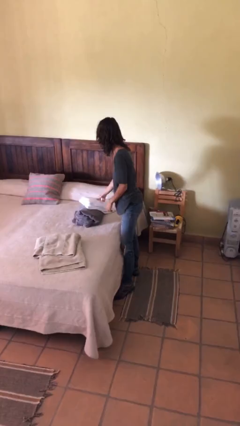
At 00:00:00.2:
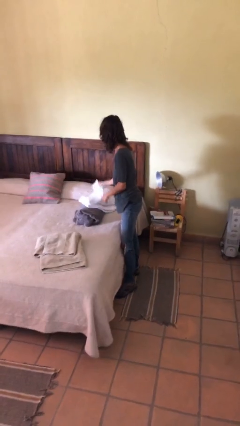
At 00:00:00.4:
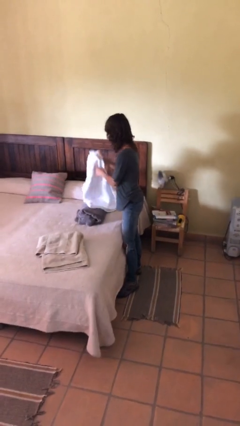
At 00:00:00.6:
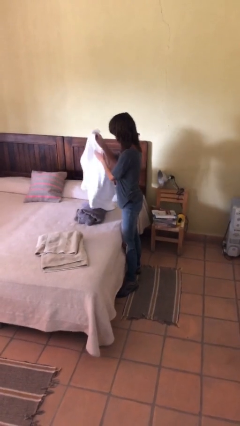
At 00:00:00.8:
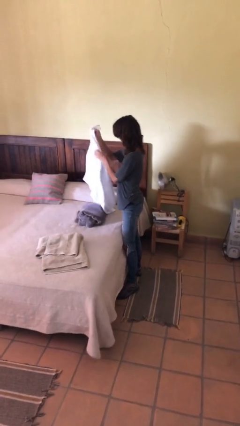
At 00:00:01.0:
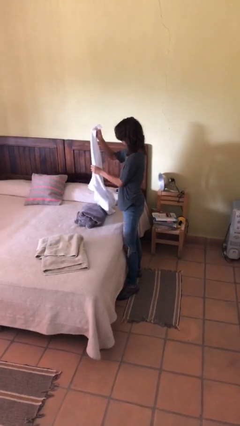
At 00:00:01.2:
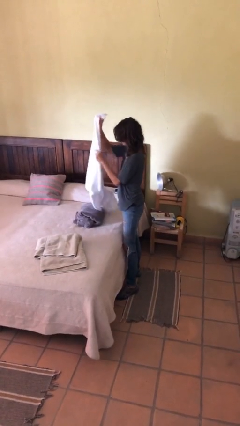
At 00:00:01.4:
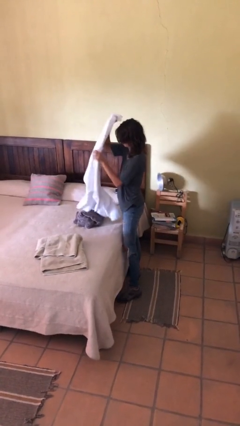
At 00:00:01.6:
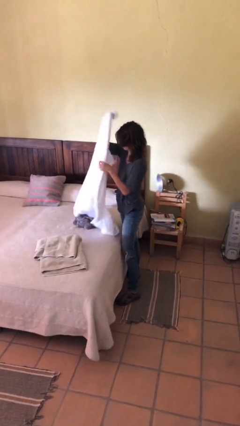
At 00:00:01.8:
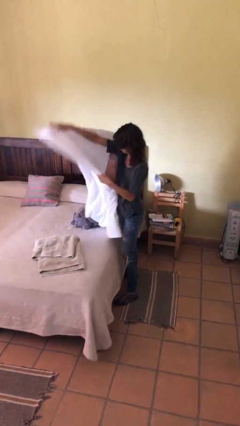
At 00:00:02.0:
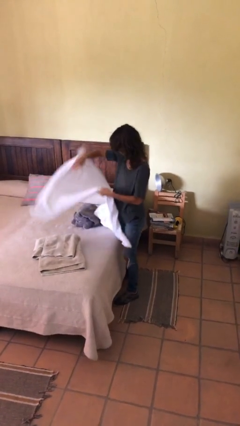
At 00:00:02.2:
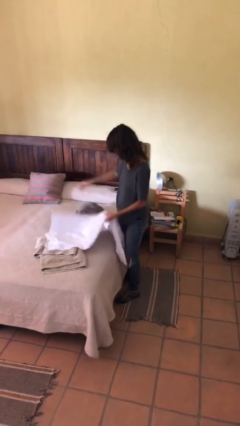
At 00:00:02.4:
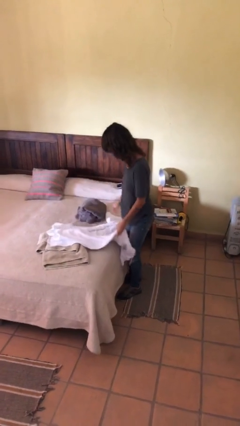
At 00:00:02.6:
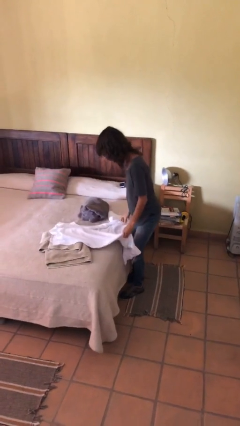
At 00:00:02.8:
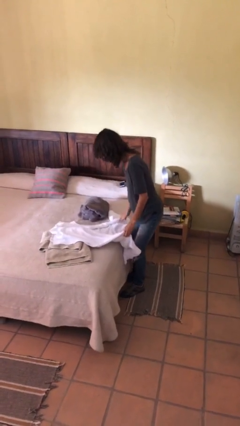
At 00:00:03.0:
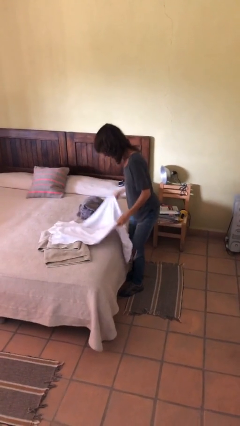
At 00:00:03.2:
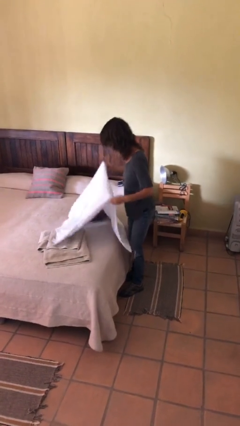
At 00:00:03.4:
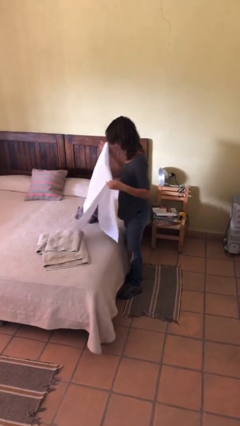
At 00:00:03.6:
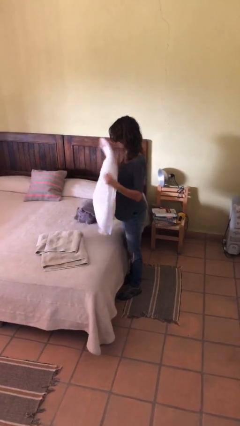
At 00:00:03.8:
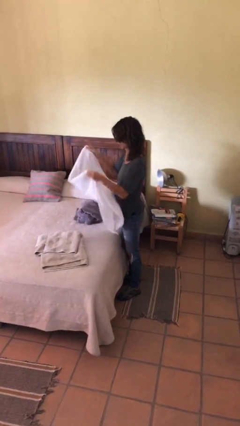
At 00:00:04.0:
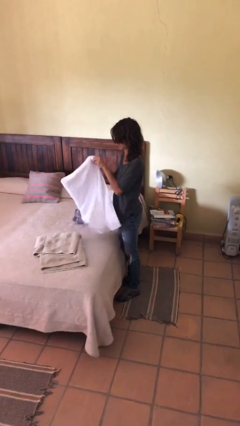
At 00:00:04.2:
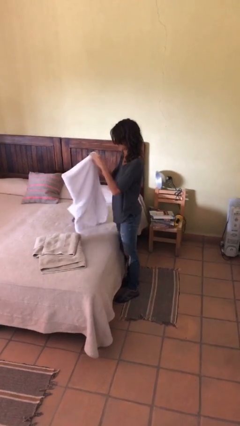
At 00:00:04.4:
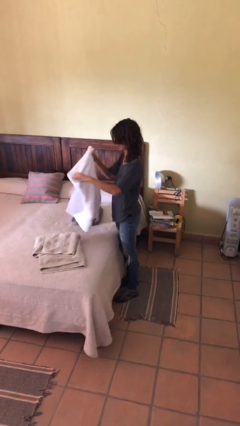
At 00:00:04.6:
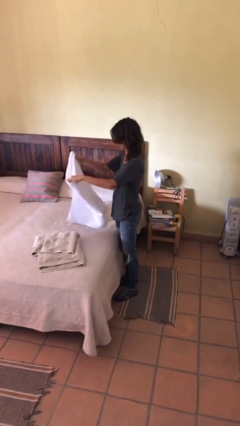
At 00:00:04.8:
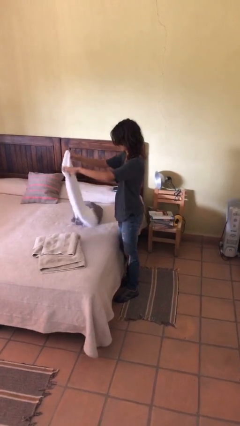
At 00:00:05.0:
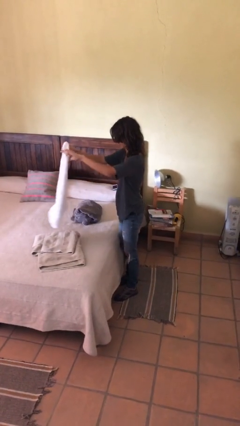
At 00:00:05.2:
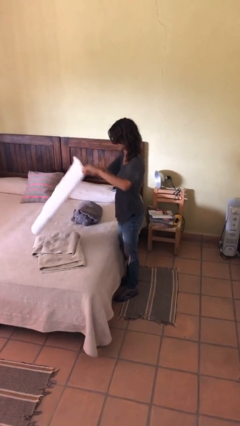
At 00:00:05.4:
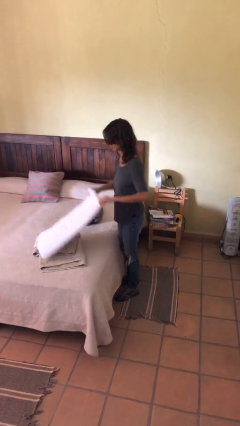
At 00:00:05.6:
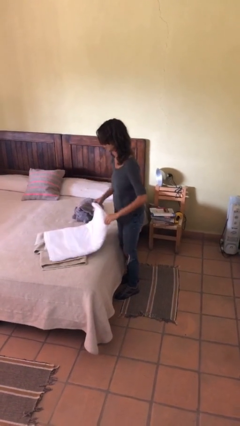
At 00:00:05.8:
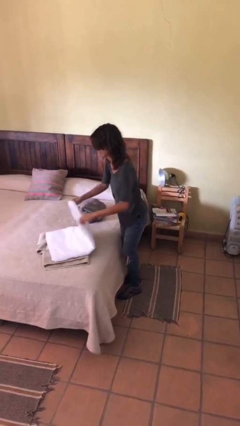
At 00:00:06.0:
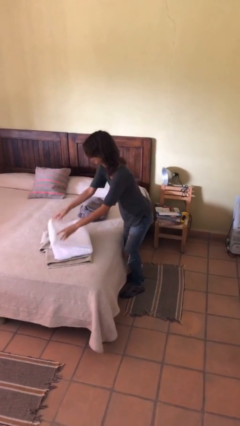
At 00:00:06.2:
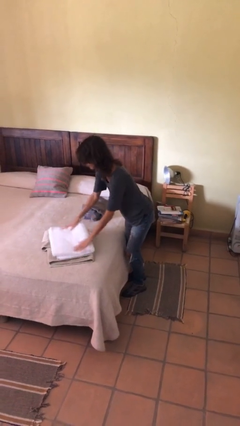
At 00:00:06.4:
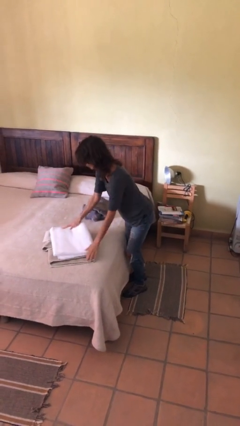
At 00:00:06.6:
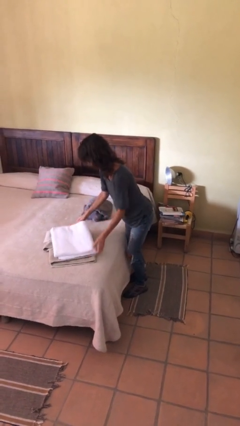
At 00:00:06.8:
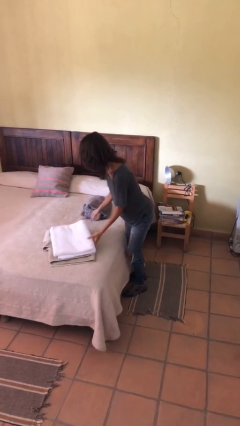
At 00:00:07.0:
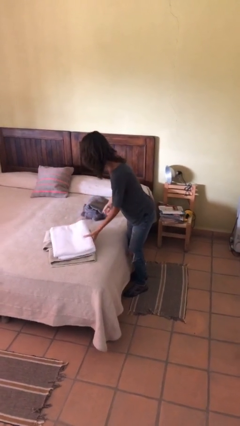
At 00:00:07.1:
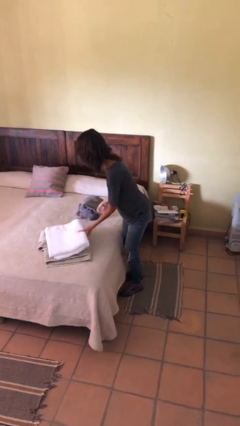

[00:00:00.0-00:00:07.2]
person folds towel

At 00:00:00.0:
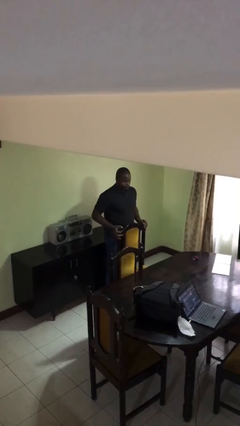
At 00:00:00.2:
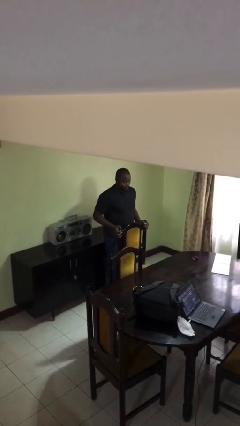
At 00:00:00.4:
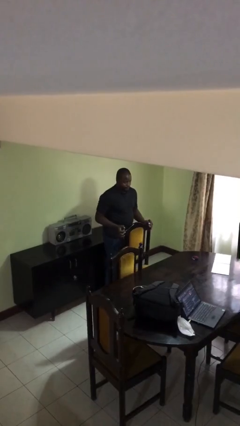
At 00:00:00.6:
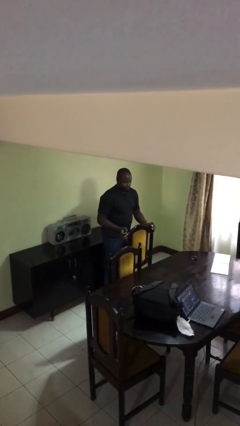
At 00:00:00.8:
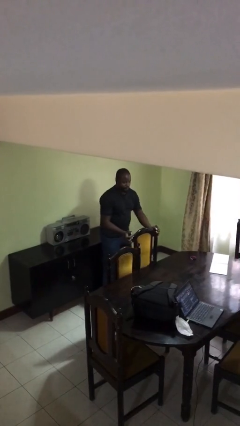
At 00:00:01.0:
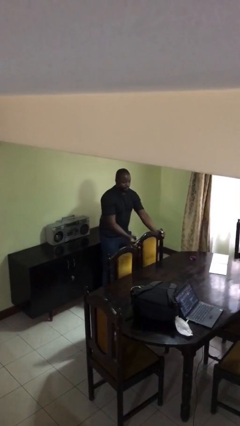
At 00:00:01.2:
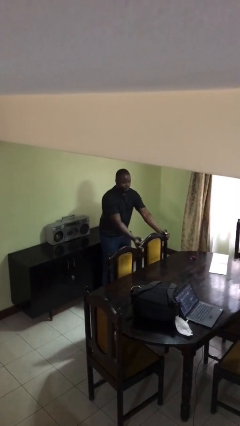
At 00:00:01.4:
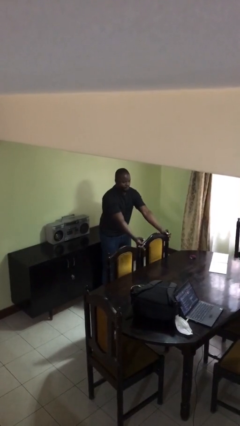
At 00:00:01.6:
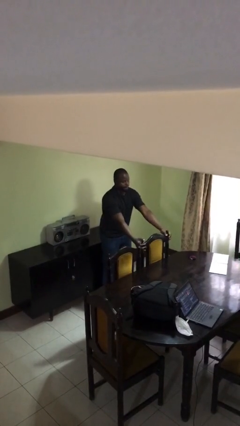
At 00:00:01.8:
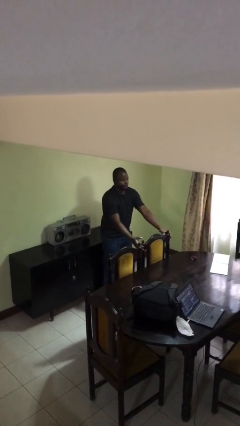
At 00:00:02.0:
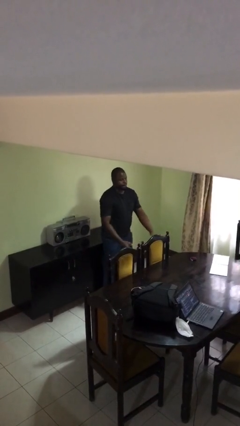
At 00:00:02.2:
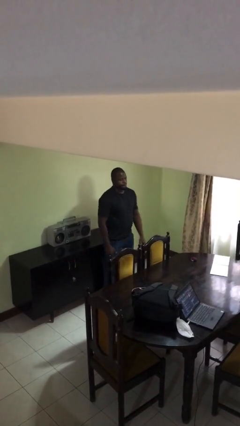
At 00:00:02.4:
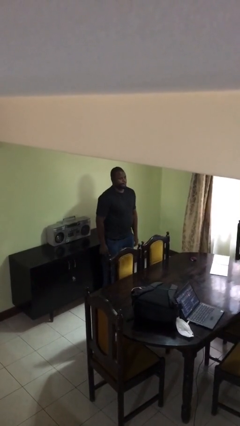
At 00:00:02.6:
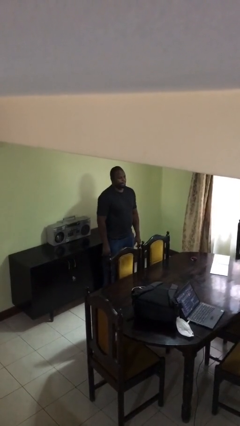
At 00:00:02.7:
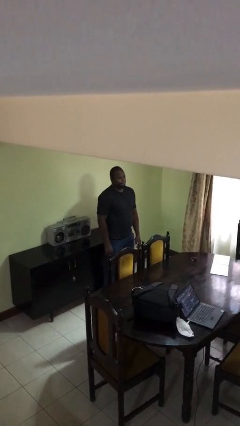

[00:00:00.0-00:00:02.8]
person pushes in chair

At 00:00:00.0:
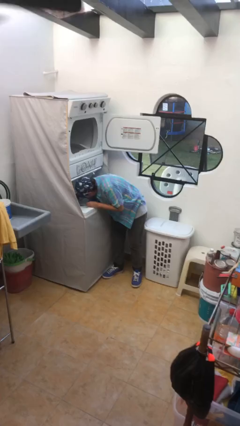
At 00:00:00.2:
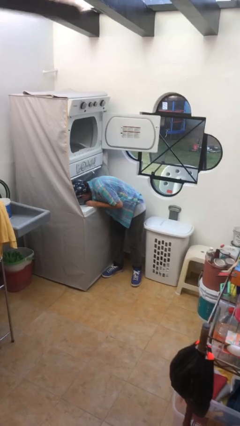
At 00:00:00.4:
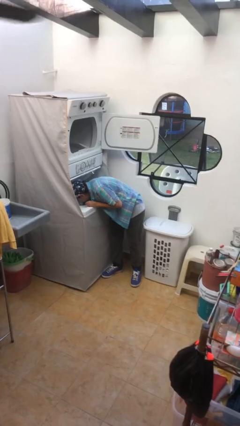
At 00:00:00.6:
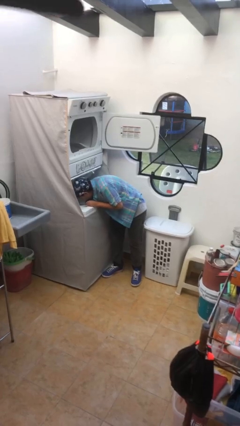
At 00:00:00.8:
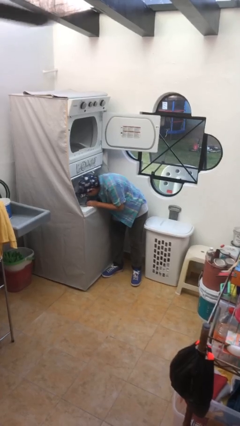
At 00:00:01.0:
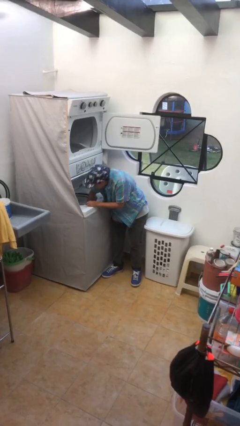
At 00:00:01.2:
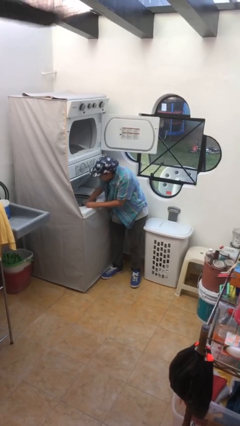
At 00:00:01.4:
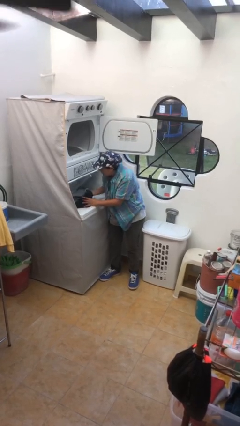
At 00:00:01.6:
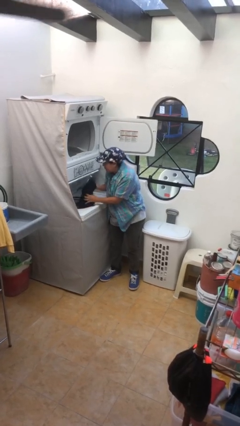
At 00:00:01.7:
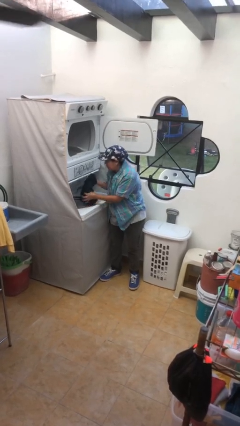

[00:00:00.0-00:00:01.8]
person unloads clotheswasher

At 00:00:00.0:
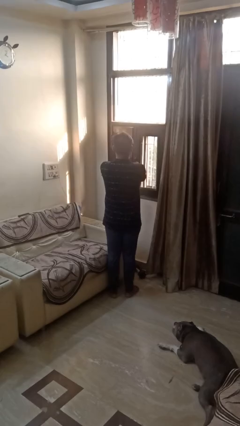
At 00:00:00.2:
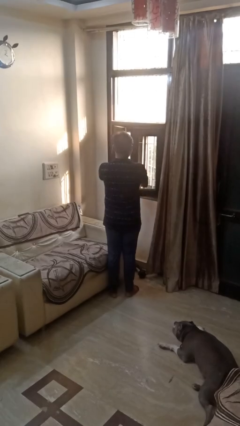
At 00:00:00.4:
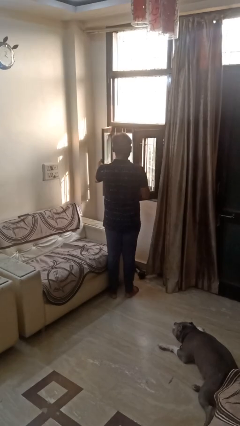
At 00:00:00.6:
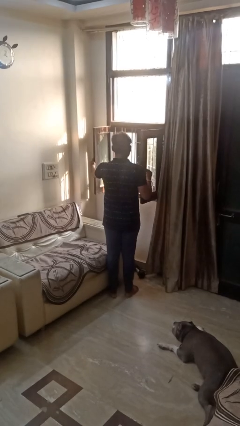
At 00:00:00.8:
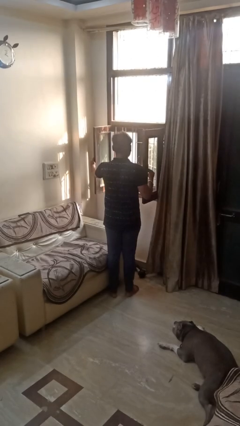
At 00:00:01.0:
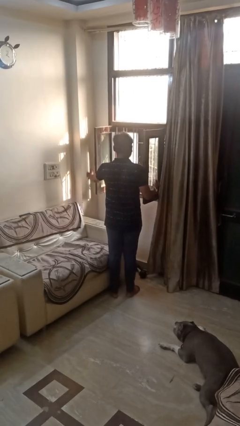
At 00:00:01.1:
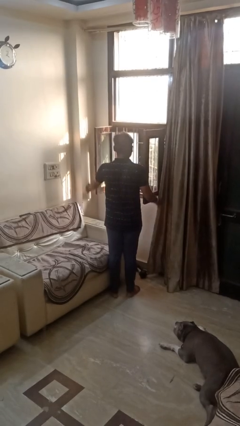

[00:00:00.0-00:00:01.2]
person opens home window

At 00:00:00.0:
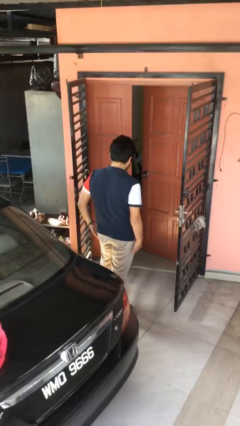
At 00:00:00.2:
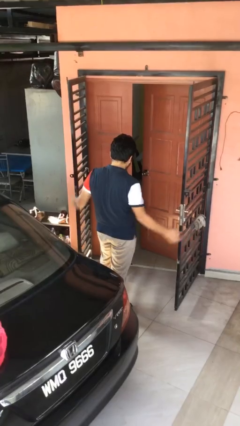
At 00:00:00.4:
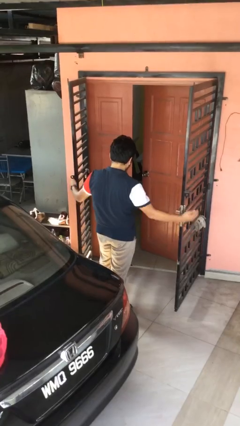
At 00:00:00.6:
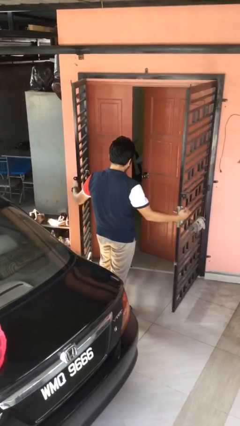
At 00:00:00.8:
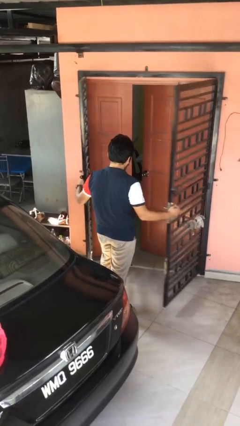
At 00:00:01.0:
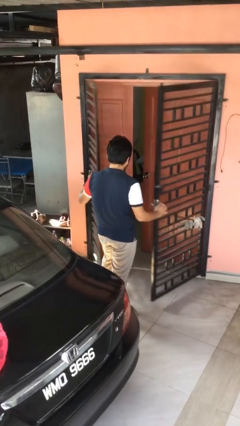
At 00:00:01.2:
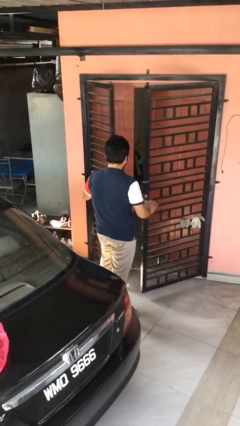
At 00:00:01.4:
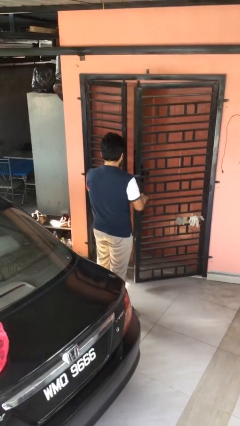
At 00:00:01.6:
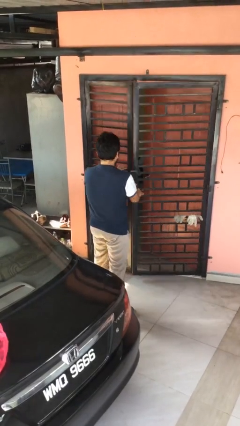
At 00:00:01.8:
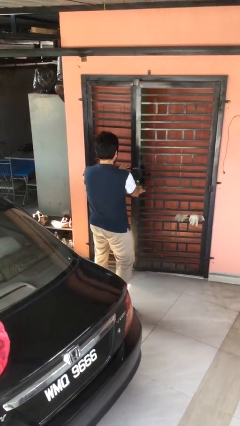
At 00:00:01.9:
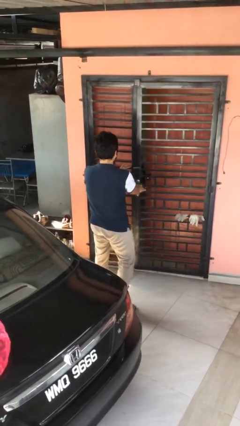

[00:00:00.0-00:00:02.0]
person closes gate

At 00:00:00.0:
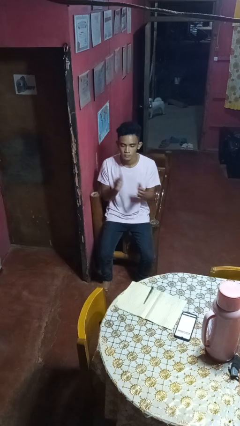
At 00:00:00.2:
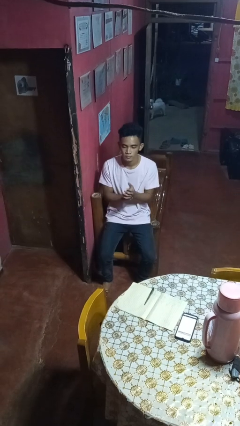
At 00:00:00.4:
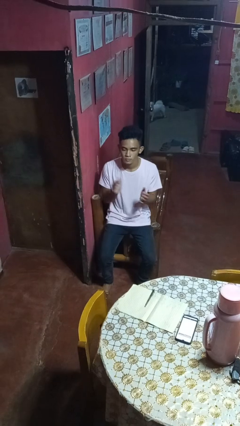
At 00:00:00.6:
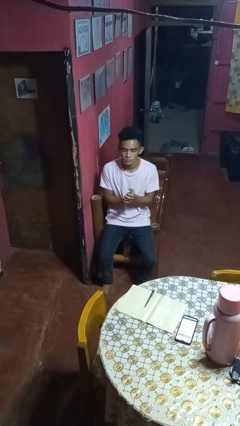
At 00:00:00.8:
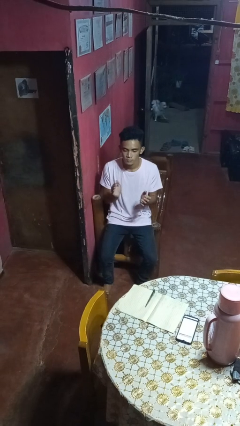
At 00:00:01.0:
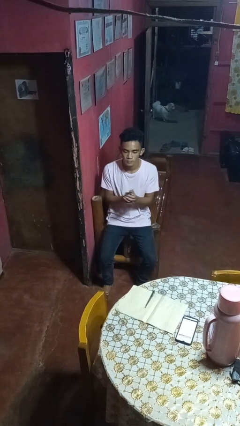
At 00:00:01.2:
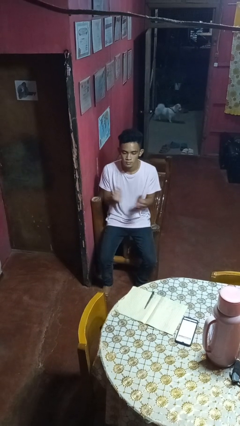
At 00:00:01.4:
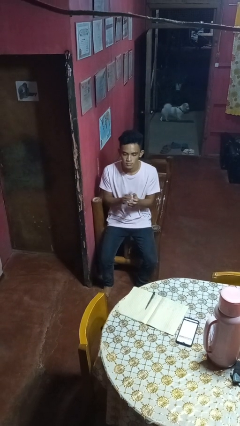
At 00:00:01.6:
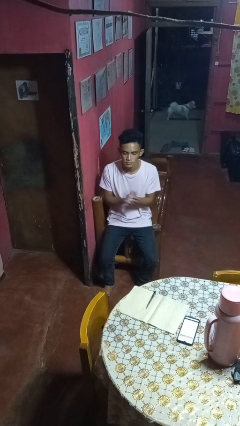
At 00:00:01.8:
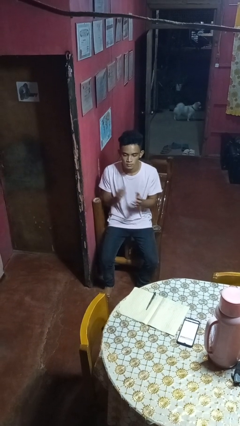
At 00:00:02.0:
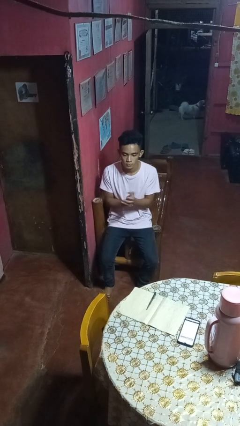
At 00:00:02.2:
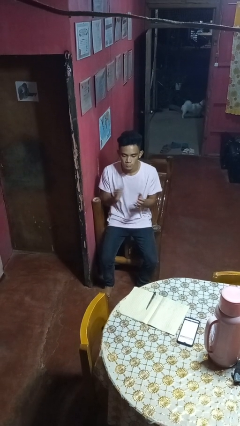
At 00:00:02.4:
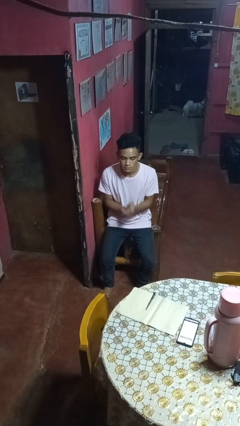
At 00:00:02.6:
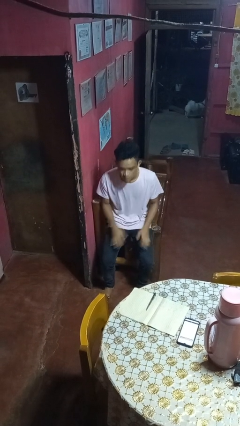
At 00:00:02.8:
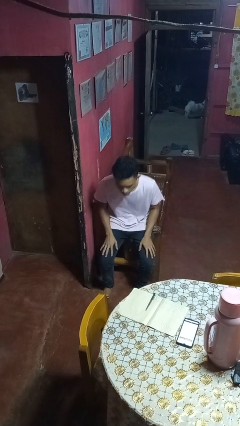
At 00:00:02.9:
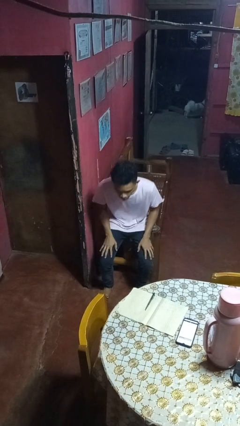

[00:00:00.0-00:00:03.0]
person claps hands
